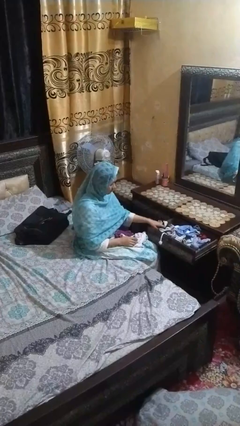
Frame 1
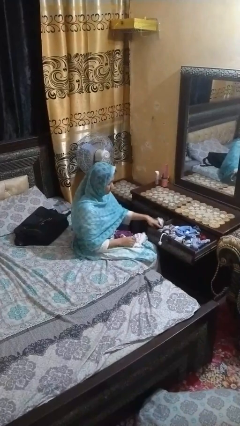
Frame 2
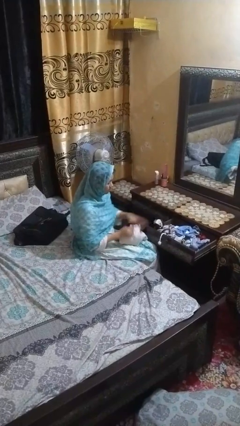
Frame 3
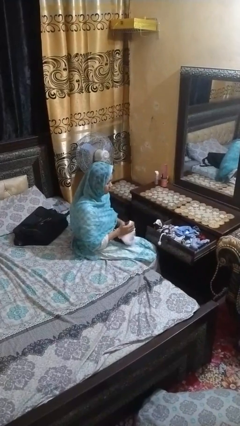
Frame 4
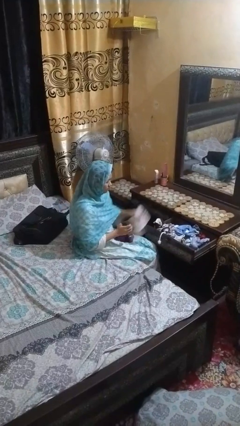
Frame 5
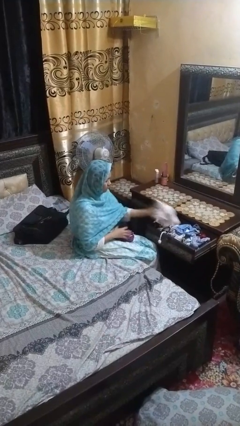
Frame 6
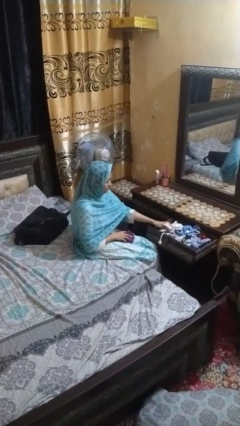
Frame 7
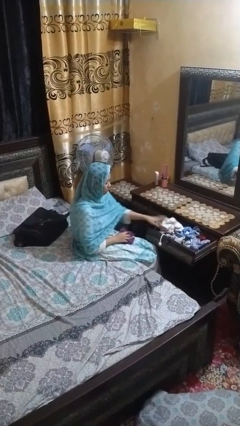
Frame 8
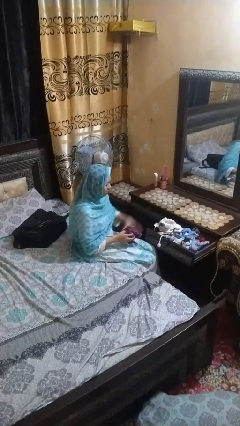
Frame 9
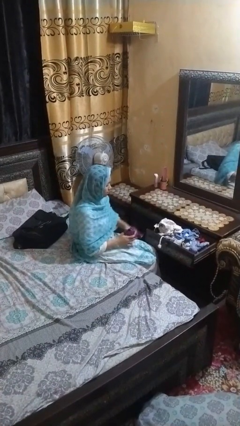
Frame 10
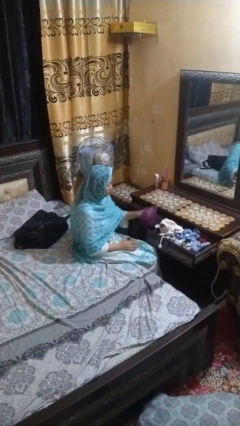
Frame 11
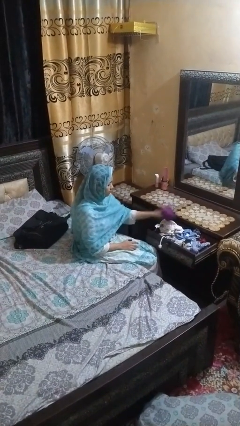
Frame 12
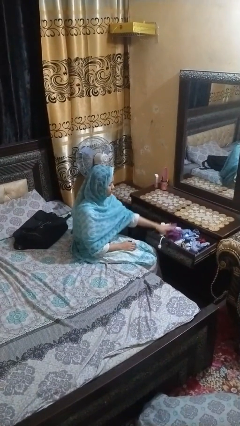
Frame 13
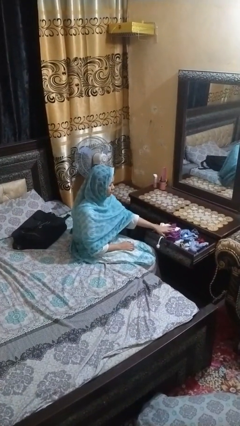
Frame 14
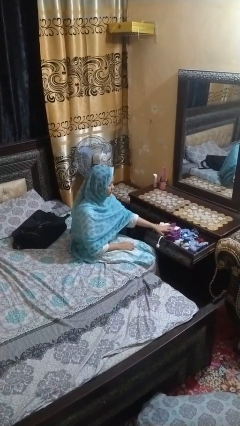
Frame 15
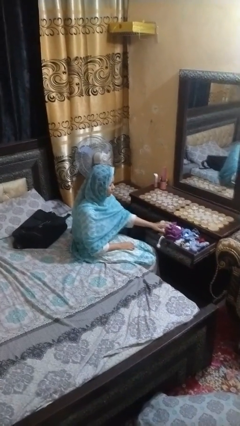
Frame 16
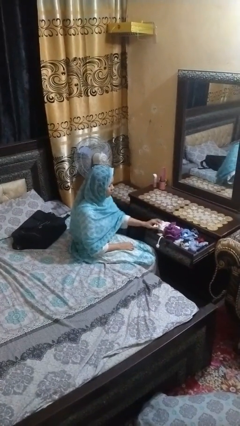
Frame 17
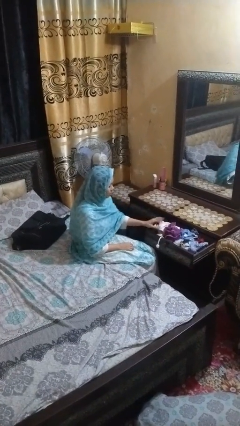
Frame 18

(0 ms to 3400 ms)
person puts clothes into dresser

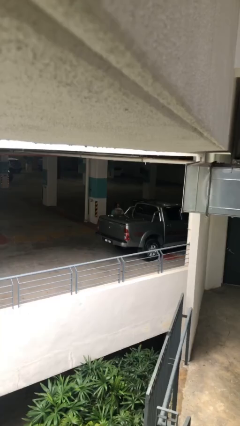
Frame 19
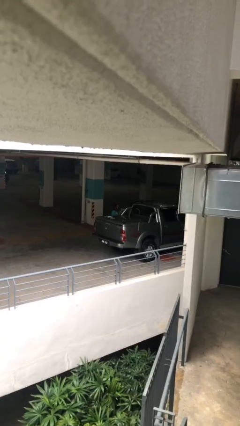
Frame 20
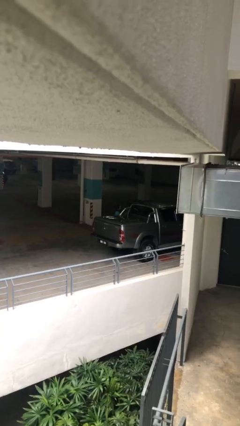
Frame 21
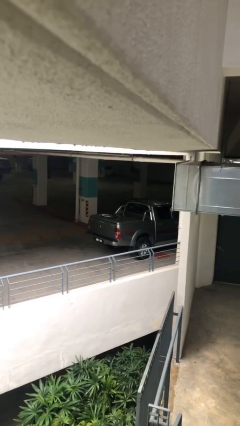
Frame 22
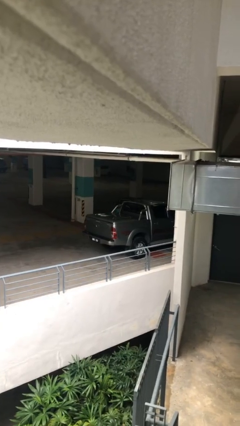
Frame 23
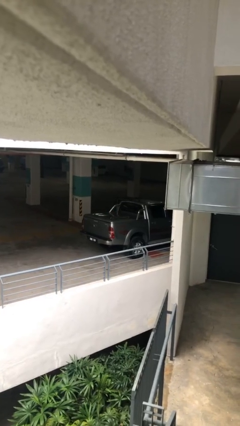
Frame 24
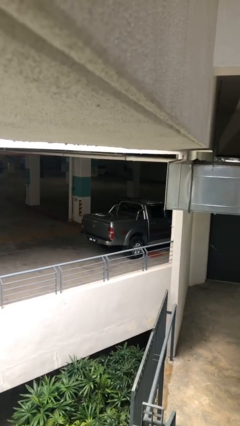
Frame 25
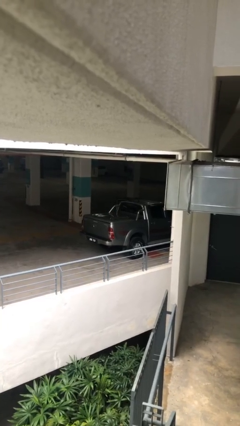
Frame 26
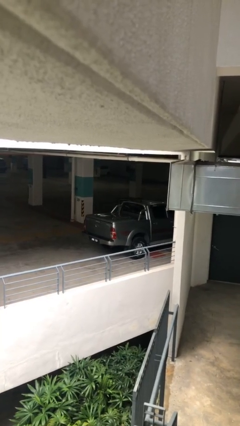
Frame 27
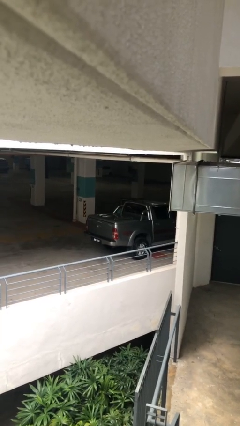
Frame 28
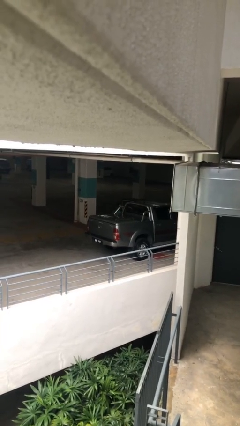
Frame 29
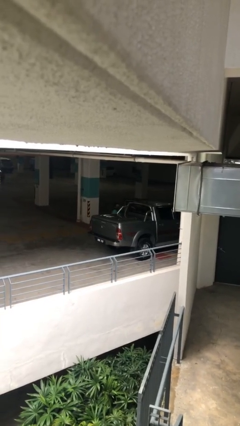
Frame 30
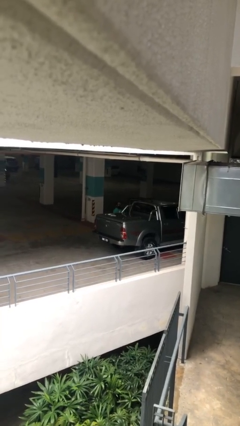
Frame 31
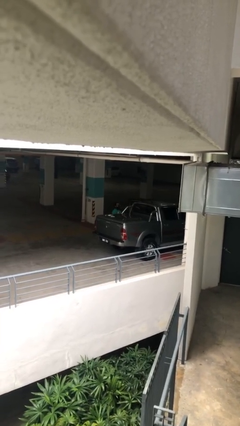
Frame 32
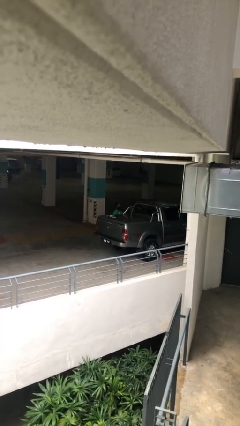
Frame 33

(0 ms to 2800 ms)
person loads car

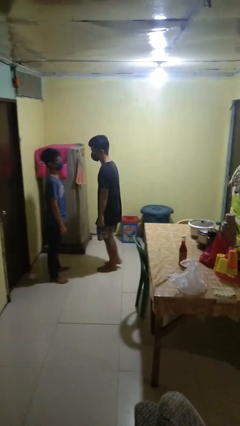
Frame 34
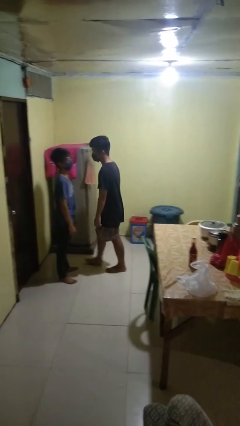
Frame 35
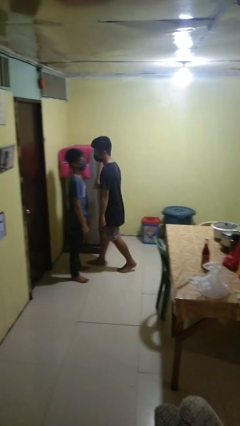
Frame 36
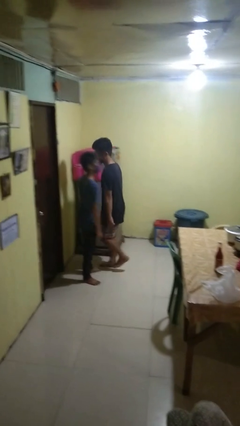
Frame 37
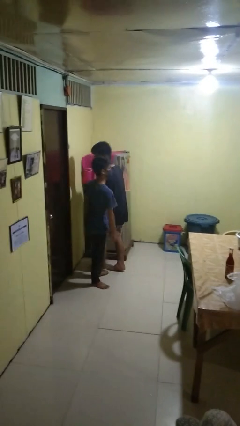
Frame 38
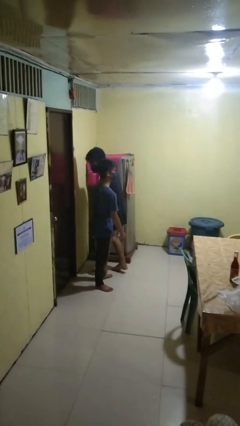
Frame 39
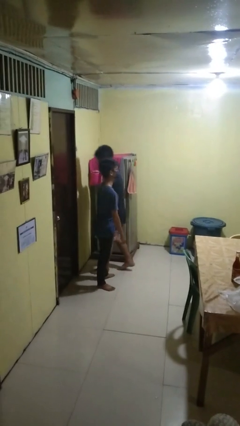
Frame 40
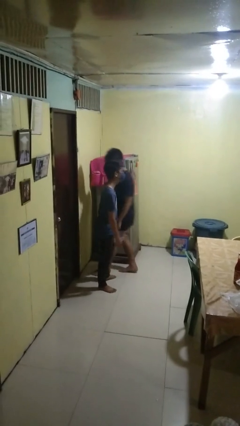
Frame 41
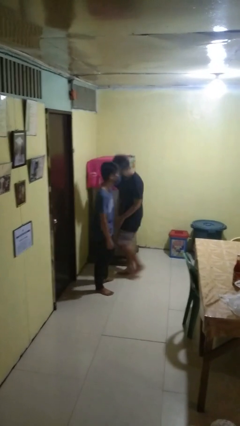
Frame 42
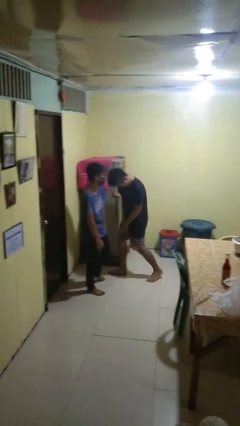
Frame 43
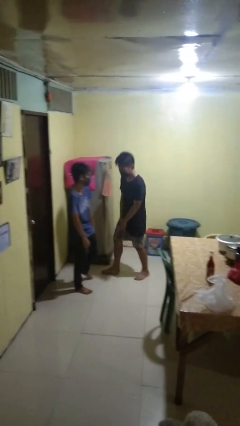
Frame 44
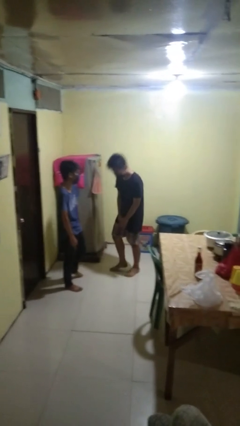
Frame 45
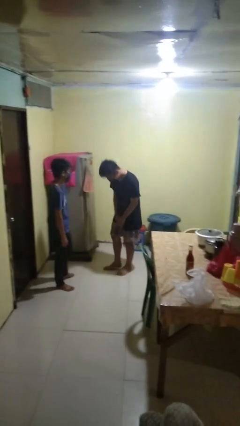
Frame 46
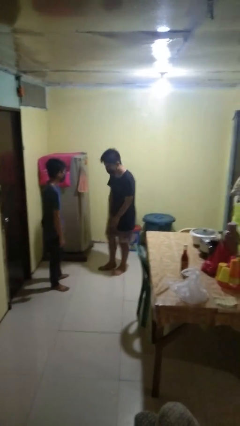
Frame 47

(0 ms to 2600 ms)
person bumps into person

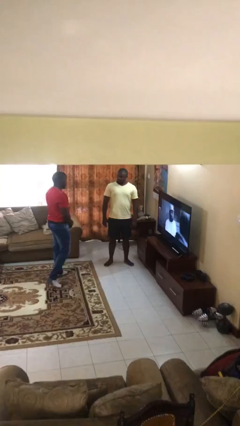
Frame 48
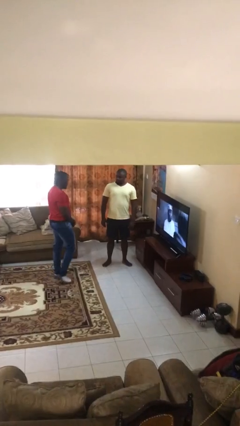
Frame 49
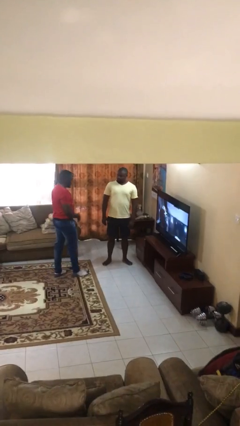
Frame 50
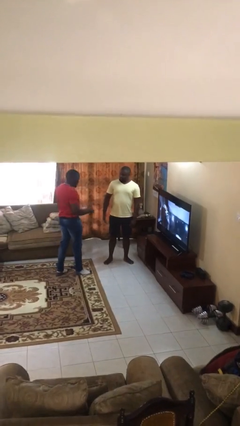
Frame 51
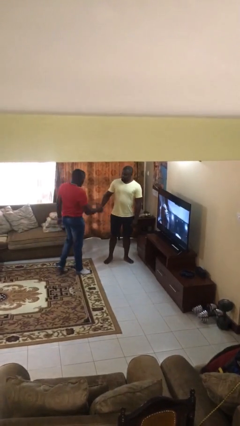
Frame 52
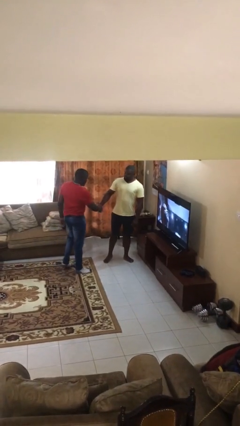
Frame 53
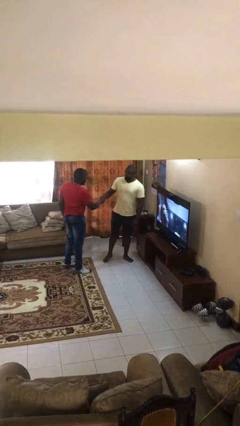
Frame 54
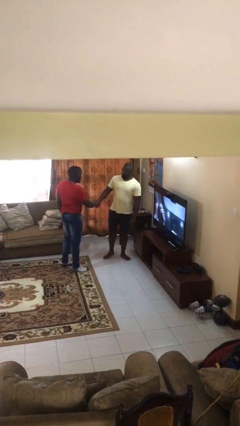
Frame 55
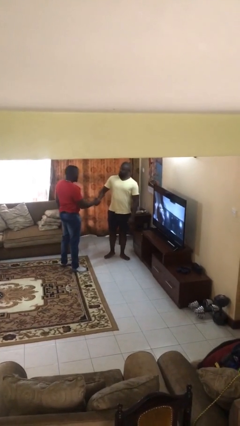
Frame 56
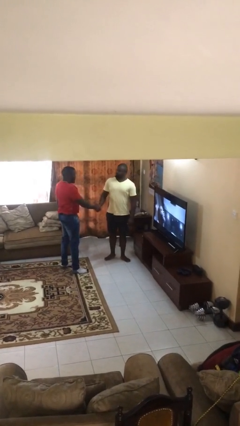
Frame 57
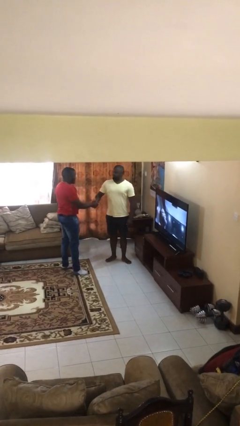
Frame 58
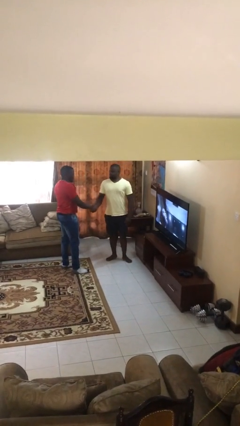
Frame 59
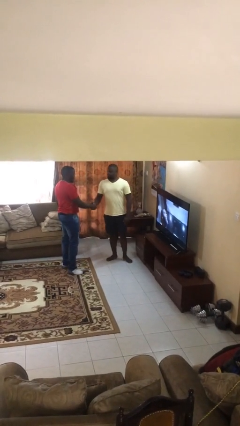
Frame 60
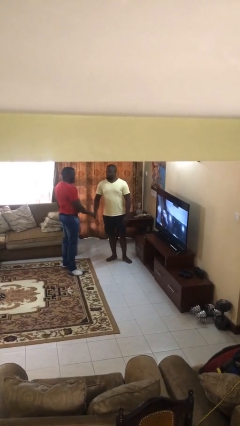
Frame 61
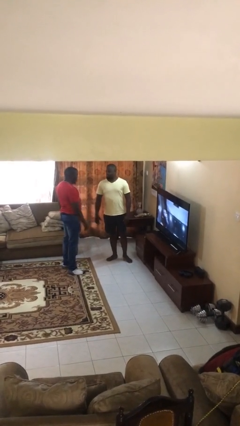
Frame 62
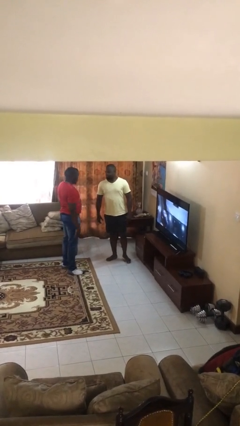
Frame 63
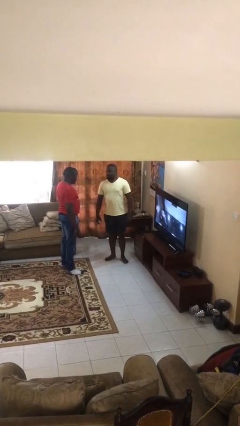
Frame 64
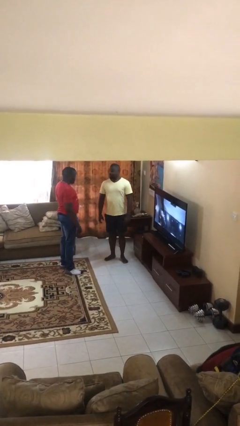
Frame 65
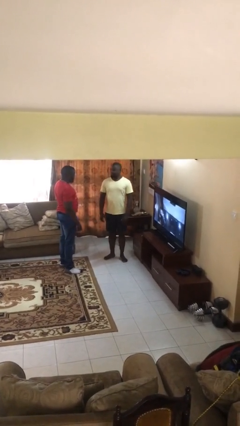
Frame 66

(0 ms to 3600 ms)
person shakes hand

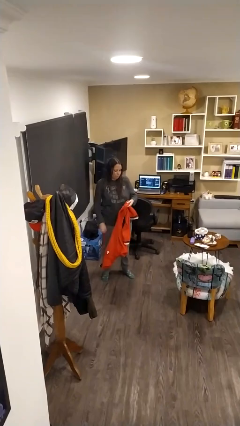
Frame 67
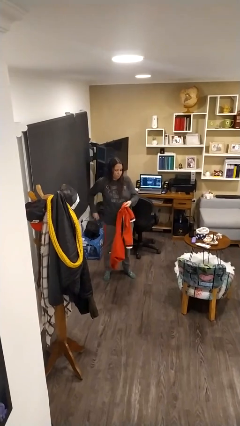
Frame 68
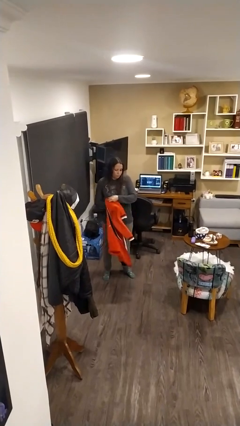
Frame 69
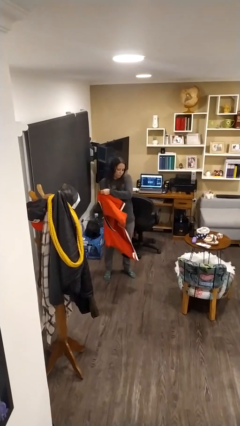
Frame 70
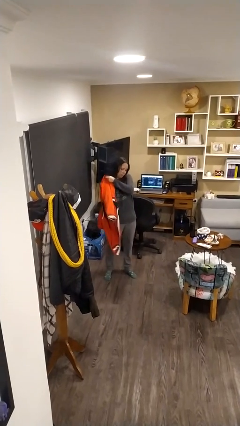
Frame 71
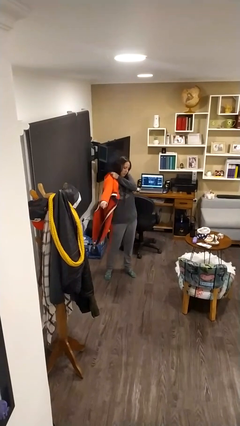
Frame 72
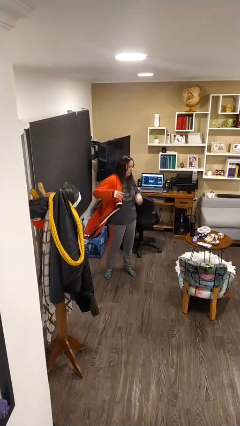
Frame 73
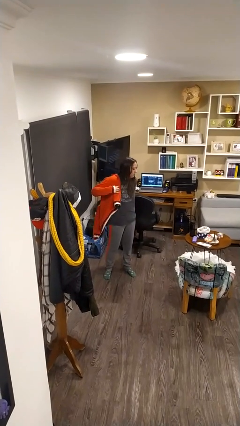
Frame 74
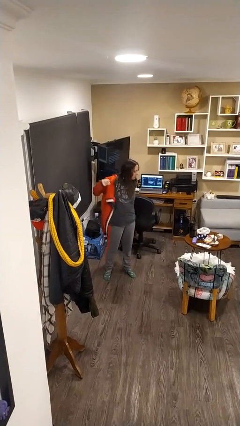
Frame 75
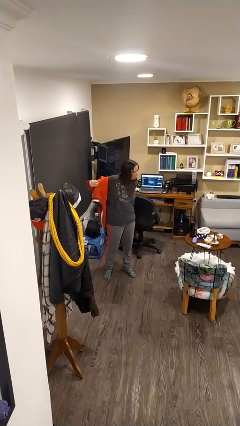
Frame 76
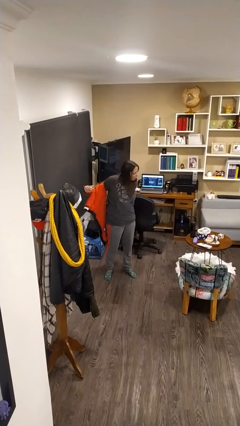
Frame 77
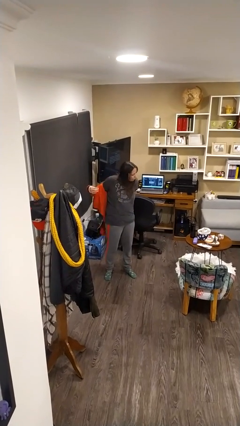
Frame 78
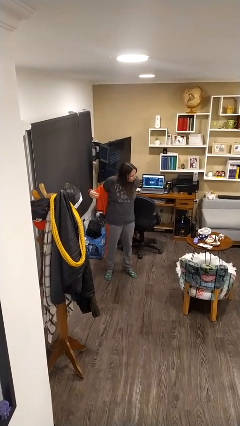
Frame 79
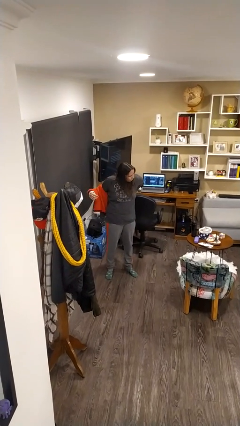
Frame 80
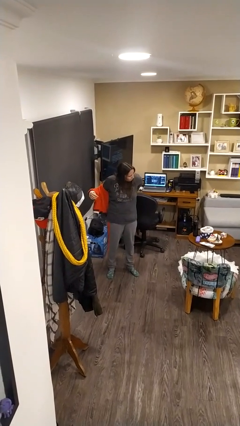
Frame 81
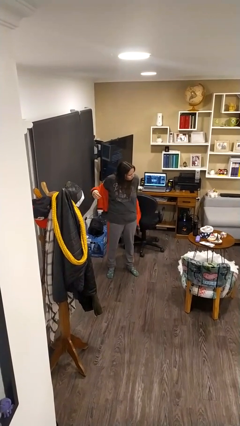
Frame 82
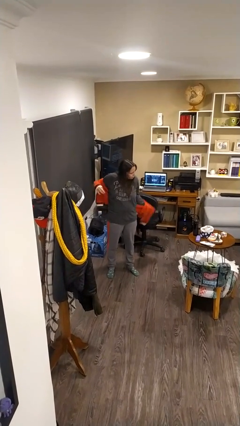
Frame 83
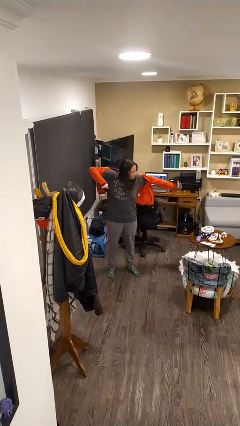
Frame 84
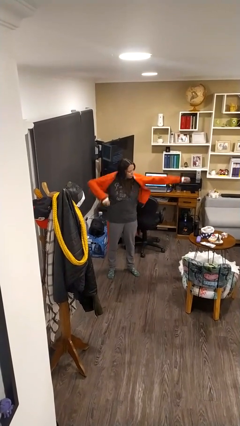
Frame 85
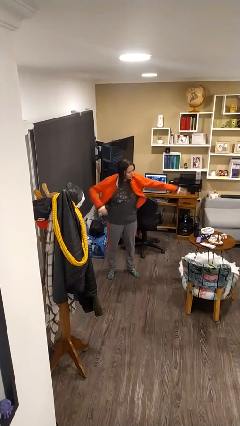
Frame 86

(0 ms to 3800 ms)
person puts on jacket

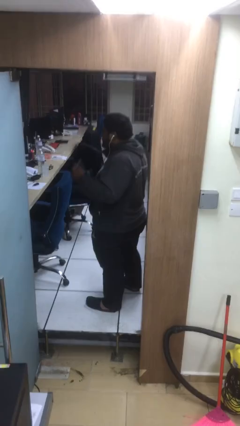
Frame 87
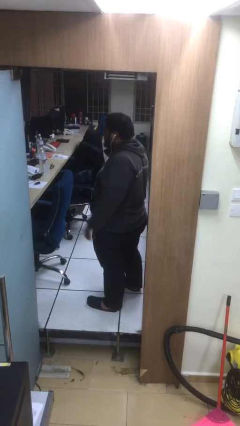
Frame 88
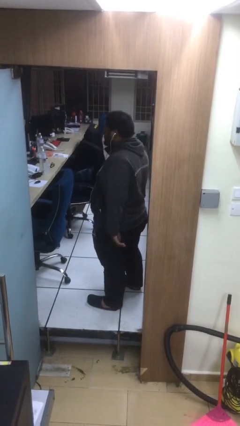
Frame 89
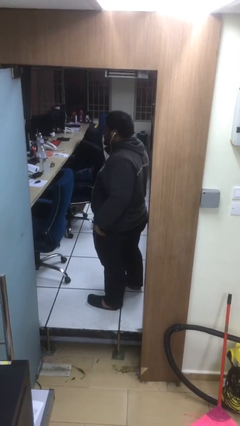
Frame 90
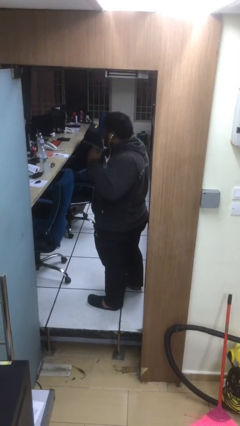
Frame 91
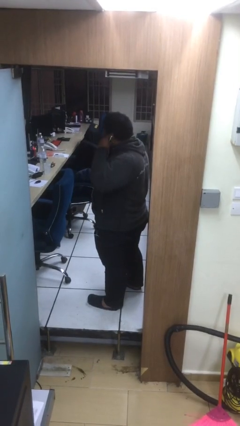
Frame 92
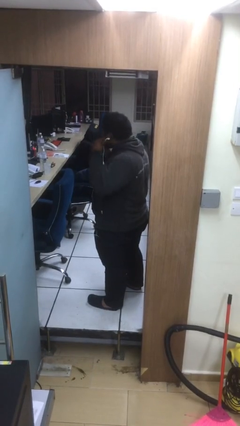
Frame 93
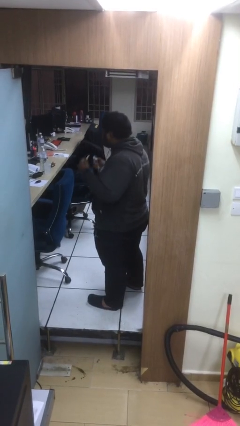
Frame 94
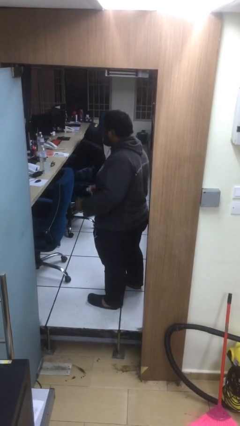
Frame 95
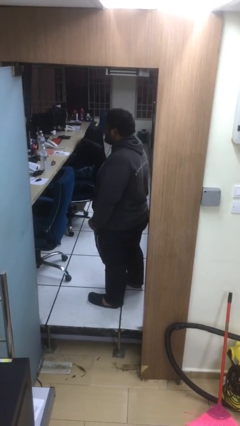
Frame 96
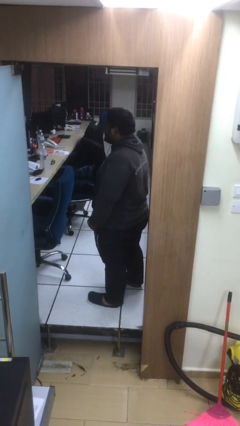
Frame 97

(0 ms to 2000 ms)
person takes off headphones
